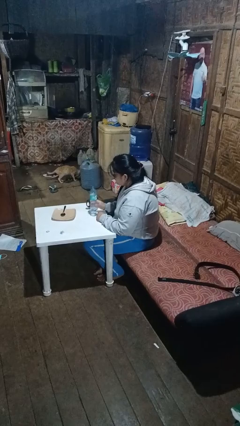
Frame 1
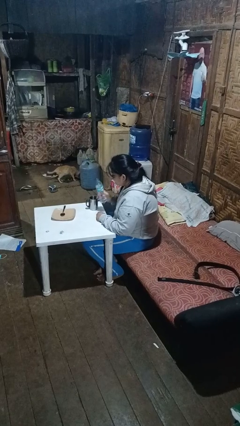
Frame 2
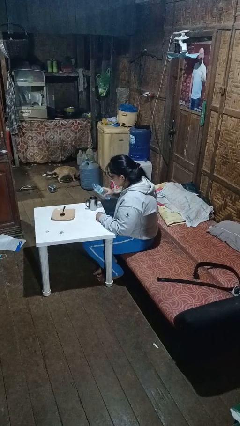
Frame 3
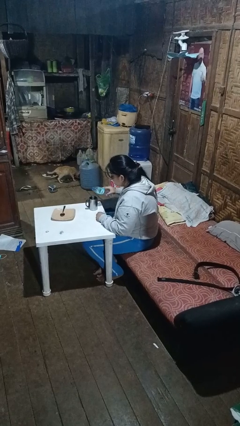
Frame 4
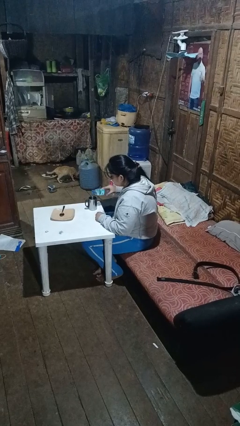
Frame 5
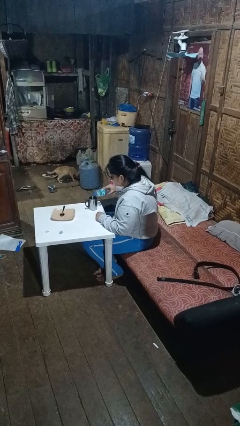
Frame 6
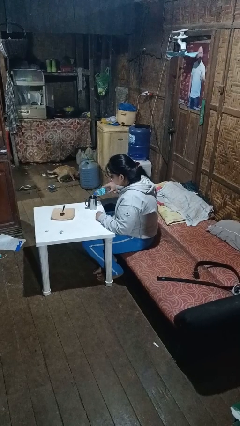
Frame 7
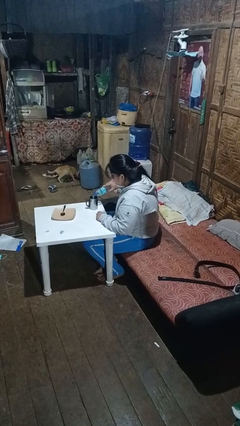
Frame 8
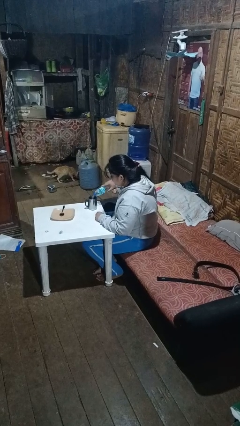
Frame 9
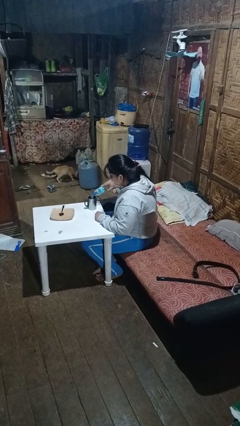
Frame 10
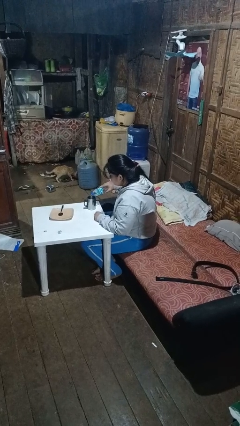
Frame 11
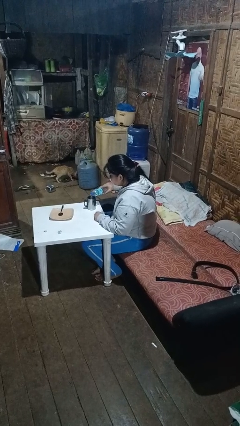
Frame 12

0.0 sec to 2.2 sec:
person pours liquid into cup

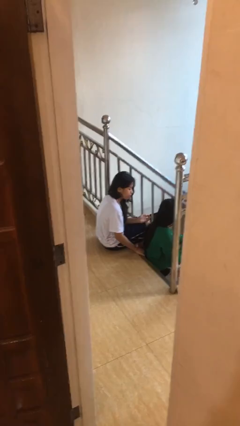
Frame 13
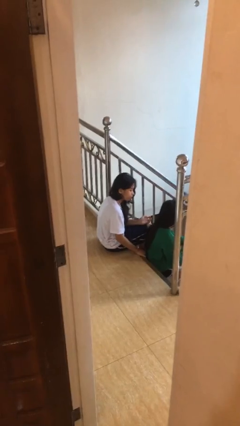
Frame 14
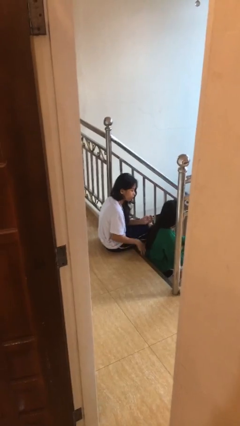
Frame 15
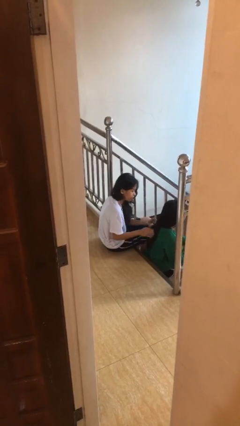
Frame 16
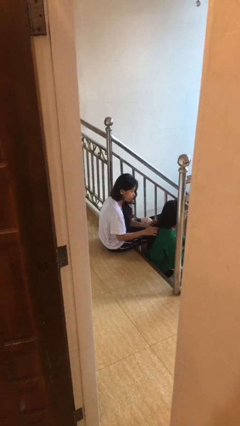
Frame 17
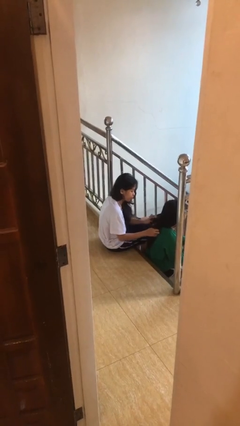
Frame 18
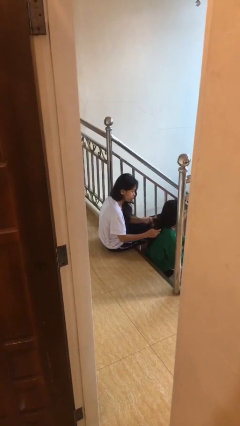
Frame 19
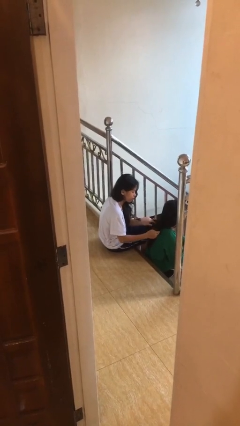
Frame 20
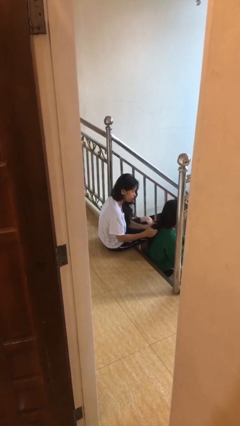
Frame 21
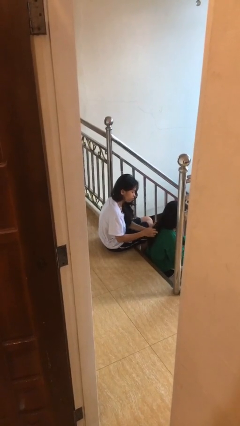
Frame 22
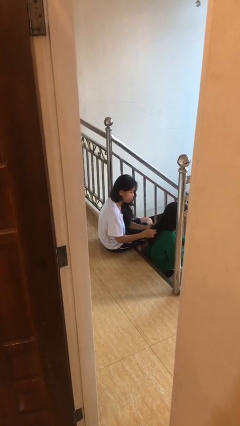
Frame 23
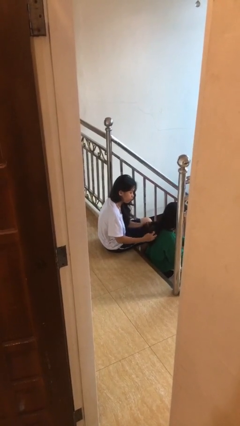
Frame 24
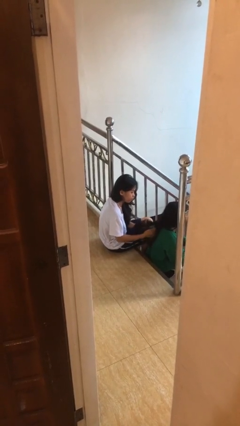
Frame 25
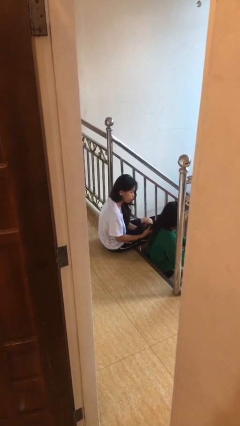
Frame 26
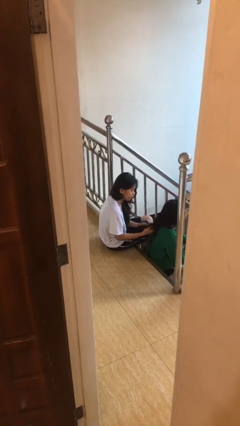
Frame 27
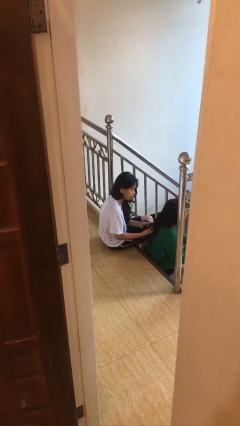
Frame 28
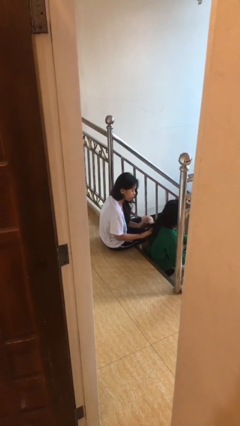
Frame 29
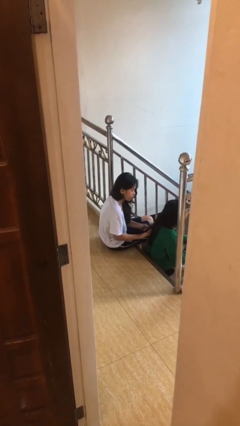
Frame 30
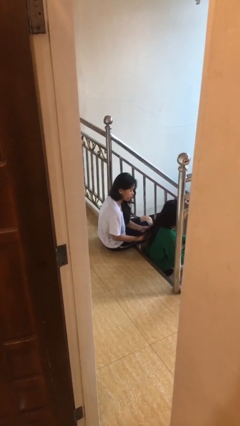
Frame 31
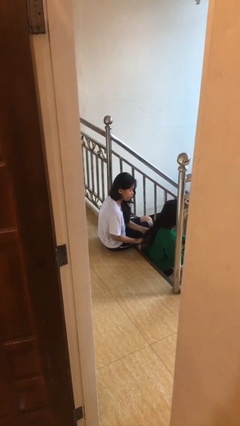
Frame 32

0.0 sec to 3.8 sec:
person braids hair of person

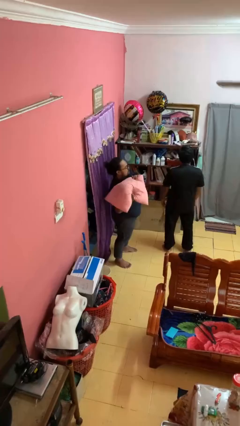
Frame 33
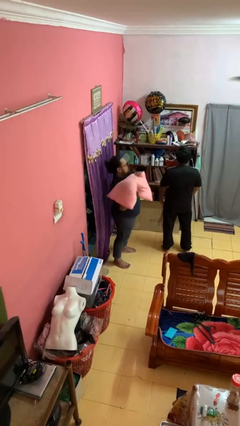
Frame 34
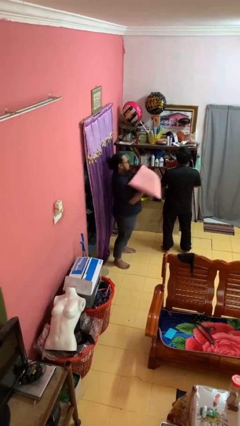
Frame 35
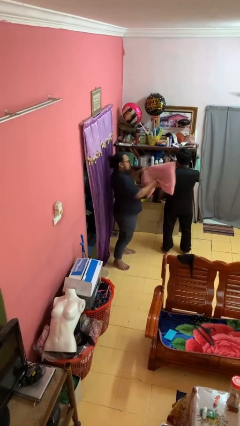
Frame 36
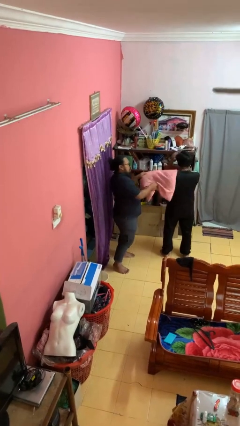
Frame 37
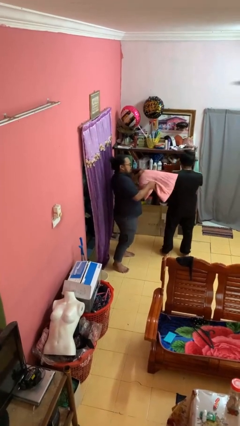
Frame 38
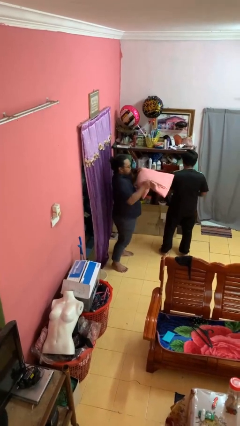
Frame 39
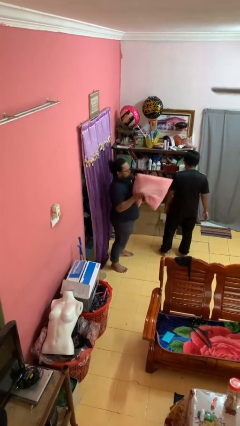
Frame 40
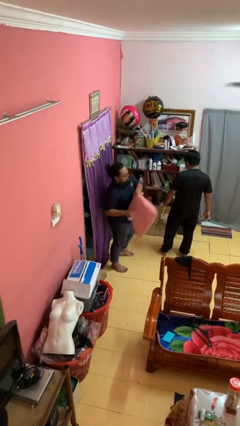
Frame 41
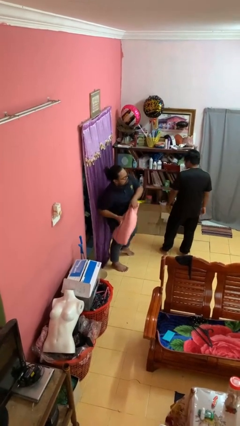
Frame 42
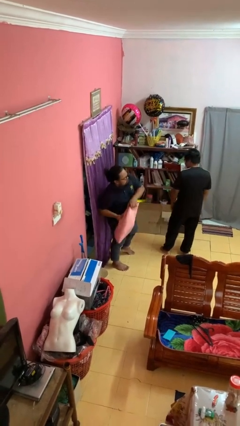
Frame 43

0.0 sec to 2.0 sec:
person hits person with pillow

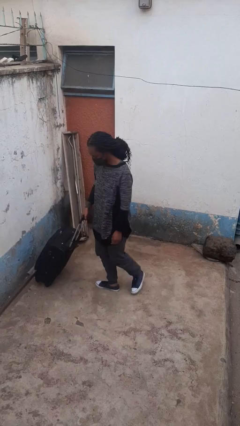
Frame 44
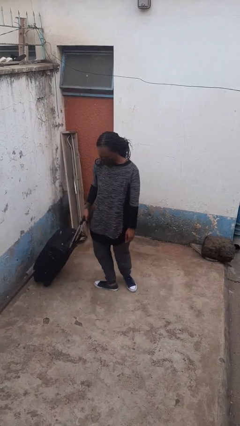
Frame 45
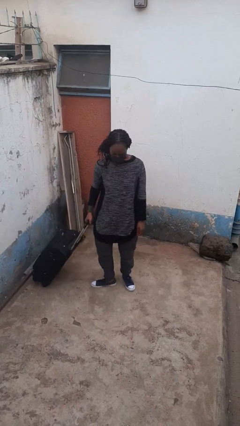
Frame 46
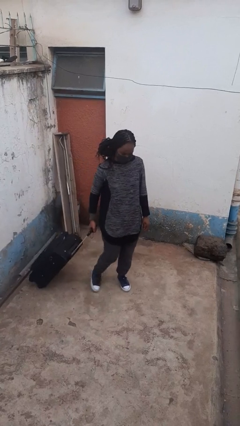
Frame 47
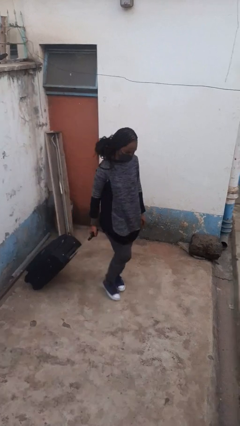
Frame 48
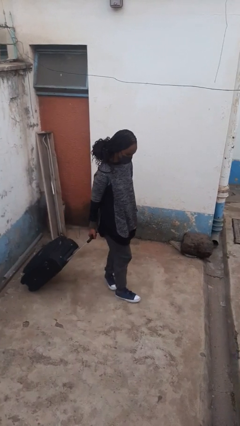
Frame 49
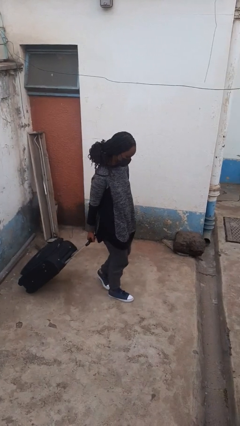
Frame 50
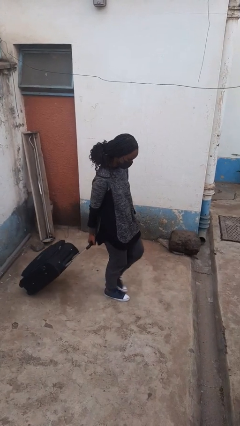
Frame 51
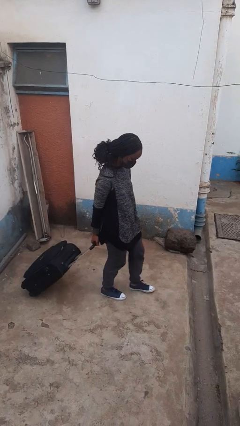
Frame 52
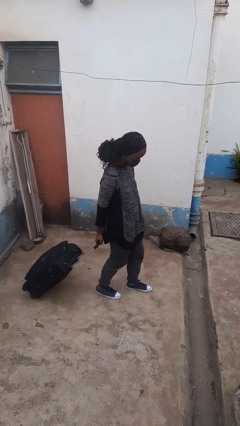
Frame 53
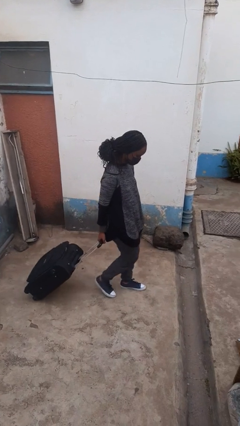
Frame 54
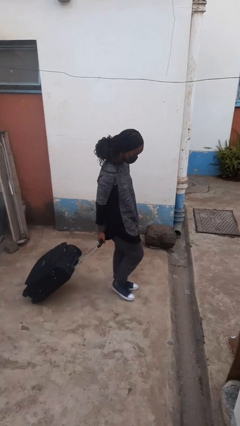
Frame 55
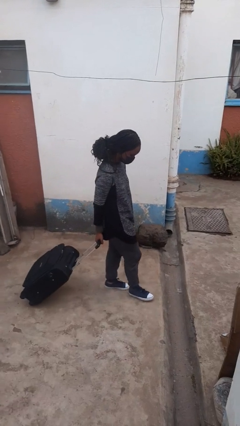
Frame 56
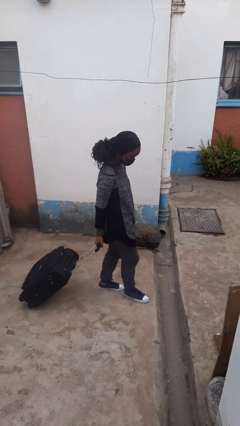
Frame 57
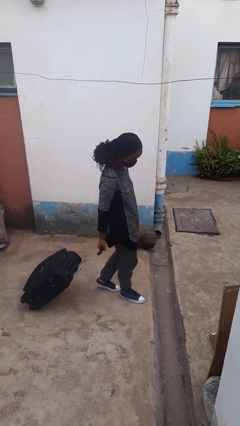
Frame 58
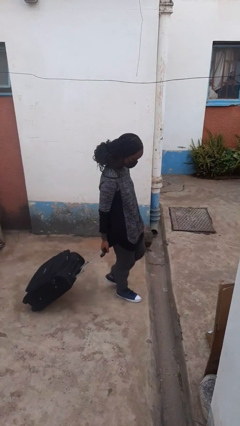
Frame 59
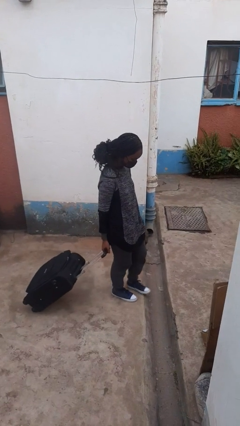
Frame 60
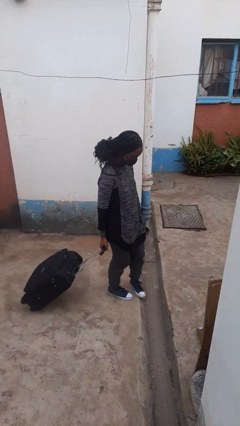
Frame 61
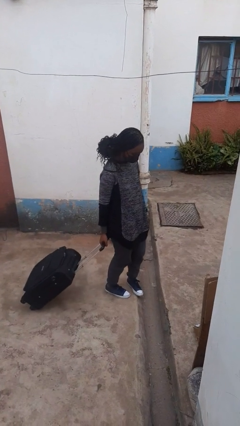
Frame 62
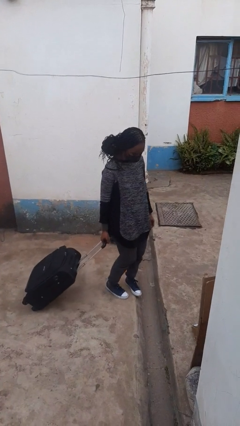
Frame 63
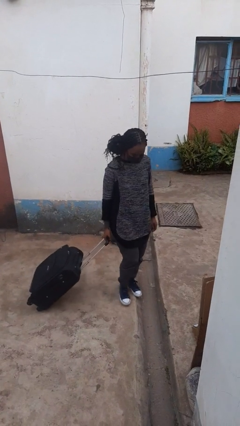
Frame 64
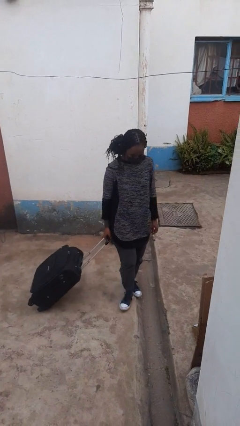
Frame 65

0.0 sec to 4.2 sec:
person pulls wheeled cart

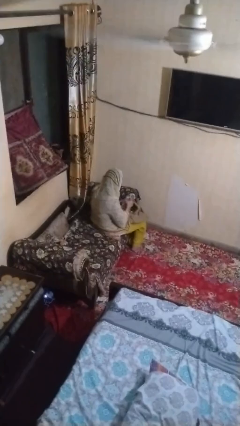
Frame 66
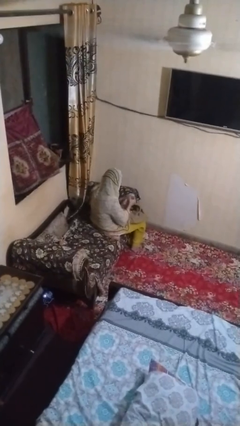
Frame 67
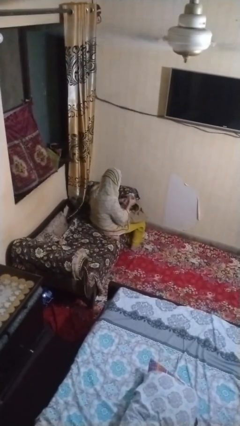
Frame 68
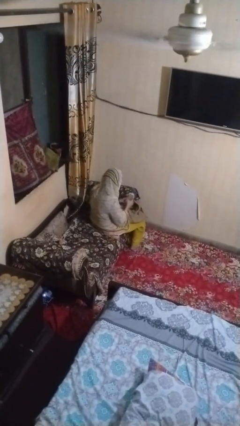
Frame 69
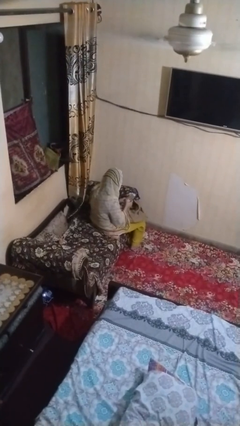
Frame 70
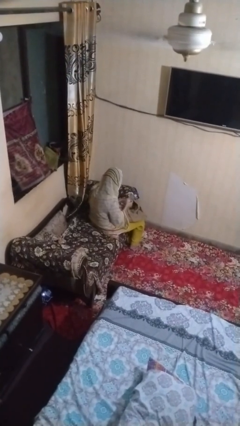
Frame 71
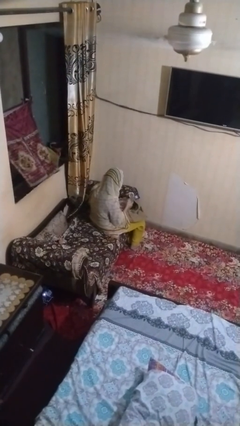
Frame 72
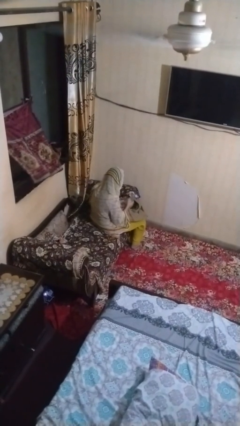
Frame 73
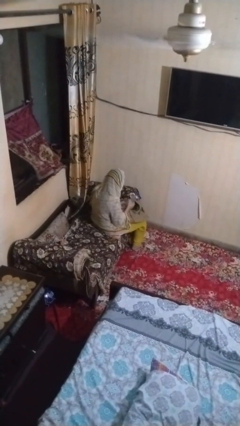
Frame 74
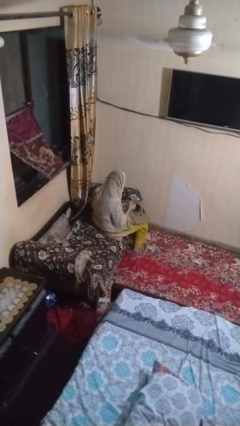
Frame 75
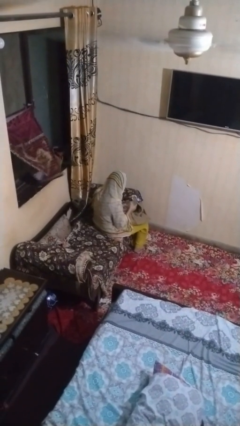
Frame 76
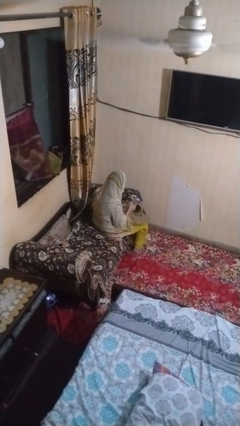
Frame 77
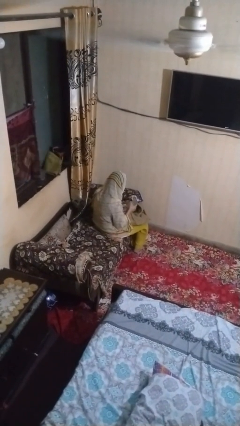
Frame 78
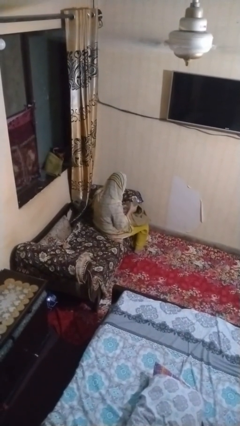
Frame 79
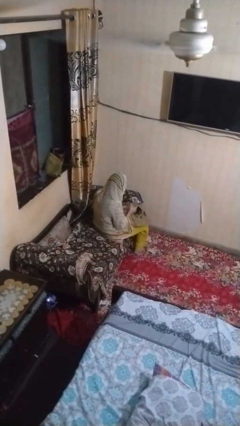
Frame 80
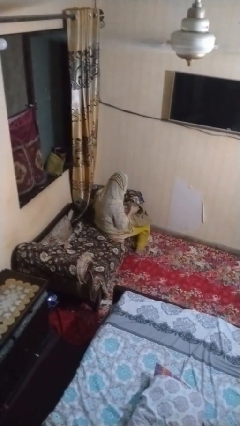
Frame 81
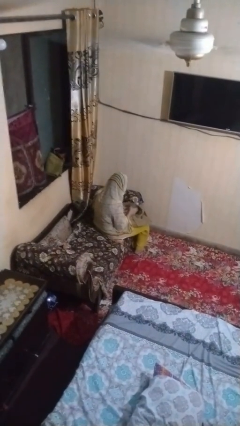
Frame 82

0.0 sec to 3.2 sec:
person takes object from bag

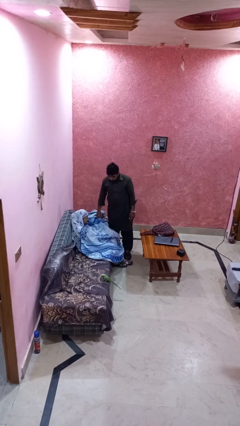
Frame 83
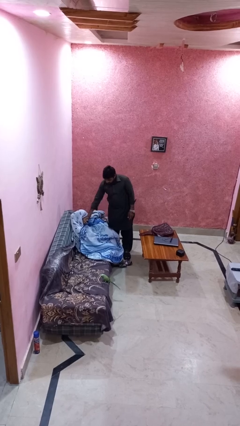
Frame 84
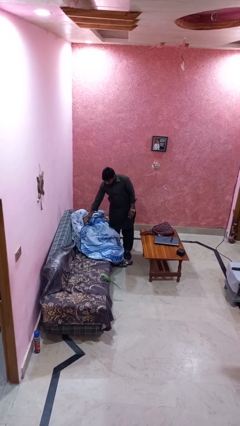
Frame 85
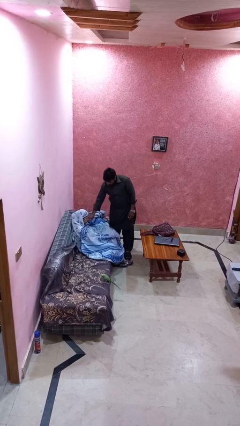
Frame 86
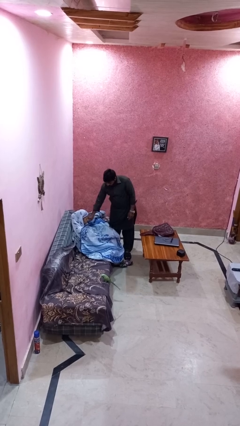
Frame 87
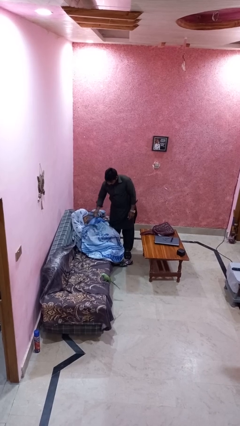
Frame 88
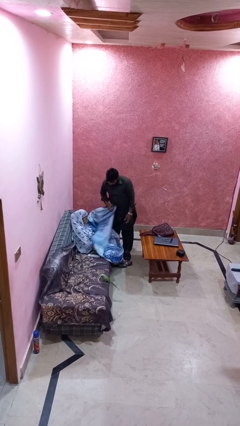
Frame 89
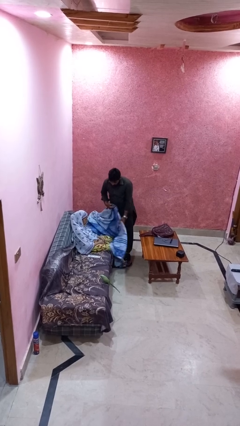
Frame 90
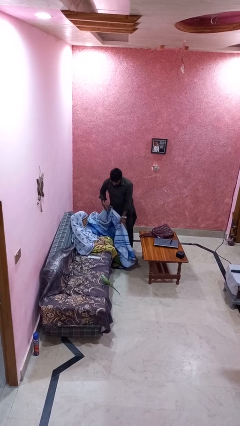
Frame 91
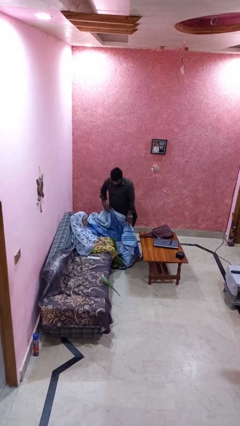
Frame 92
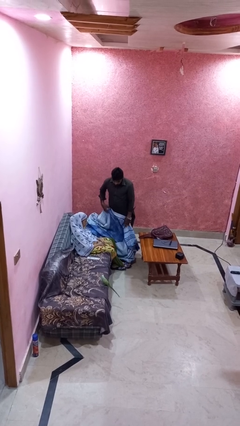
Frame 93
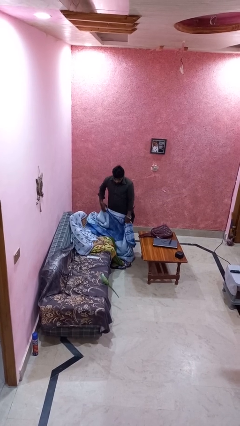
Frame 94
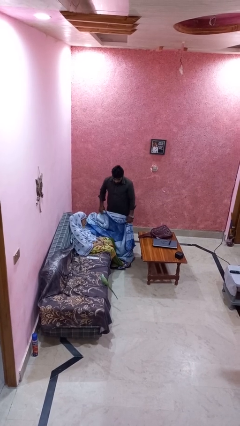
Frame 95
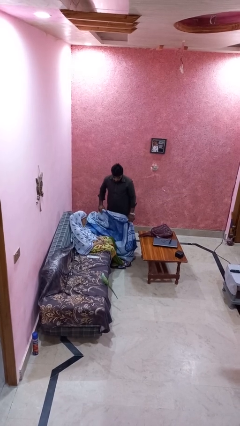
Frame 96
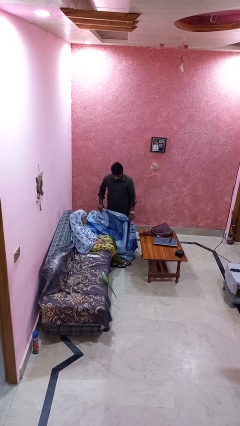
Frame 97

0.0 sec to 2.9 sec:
person uncovers friend with blanket
